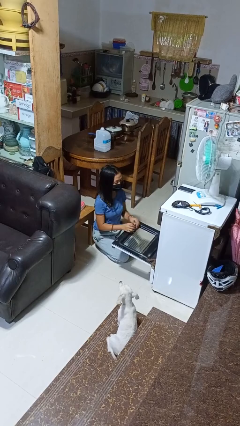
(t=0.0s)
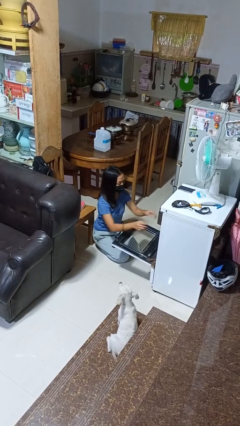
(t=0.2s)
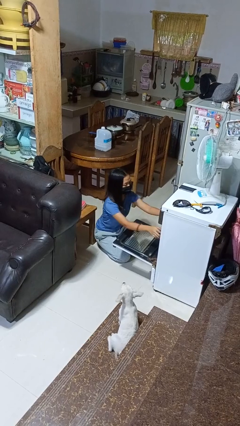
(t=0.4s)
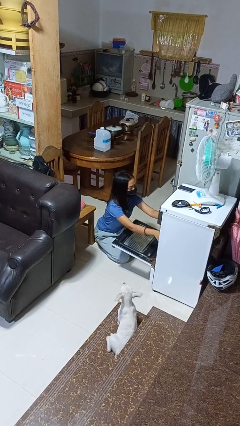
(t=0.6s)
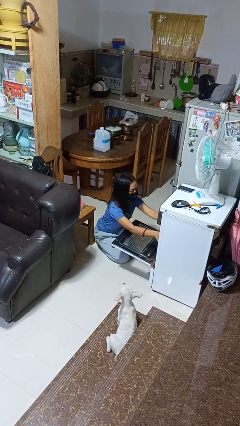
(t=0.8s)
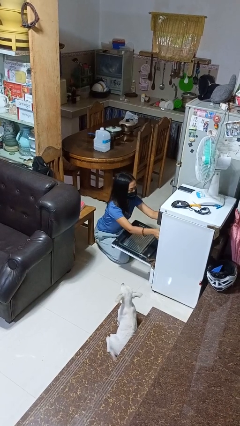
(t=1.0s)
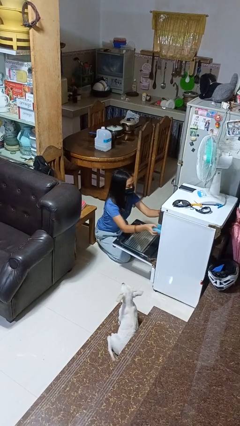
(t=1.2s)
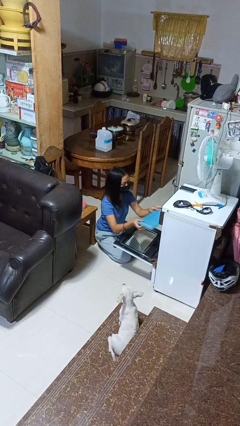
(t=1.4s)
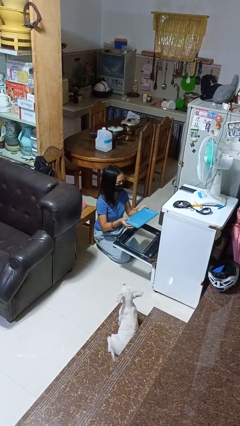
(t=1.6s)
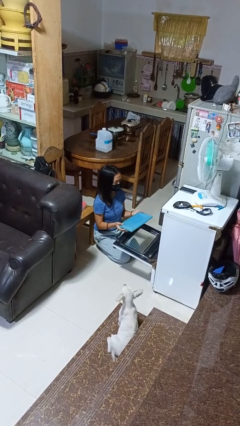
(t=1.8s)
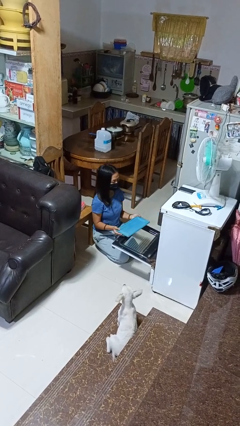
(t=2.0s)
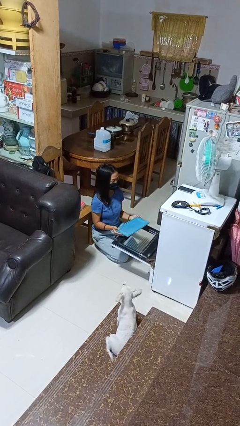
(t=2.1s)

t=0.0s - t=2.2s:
person takes object from oven

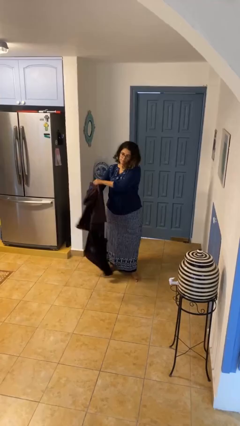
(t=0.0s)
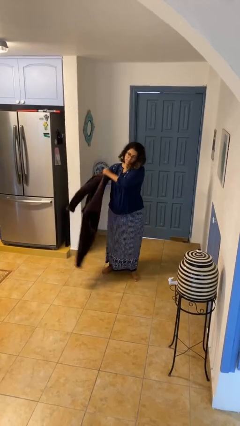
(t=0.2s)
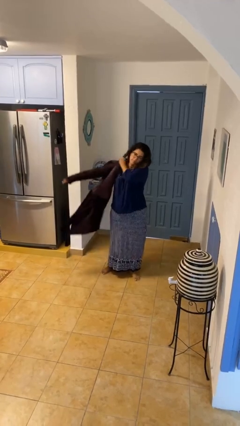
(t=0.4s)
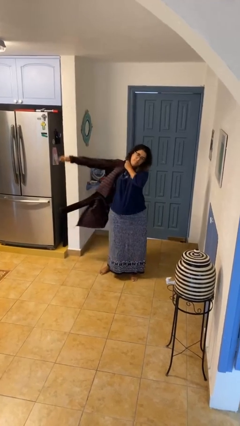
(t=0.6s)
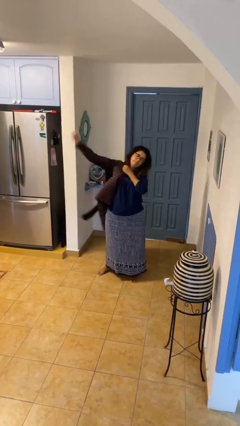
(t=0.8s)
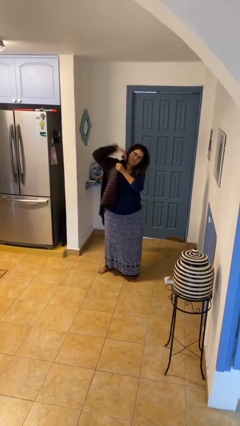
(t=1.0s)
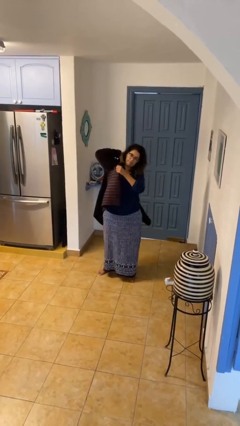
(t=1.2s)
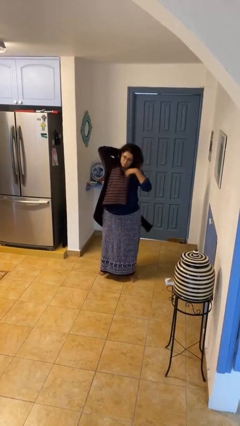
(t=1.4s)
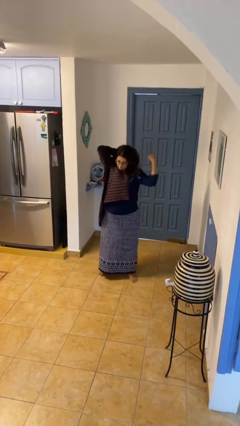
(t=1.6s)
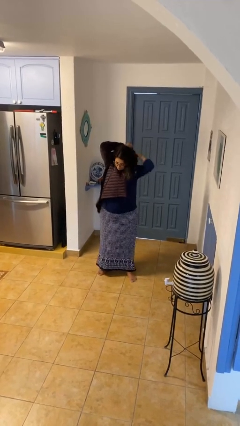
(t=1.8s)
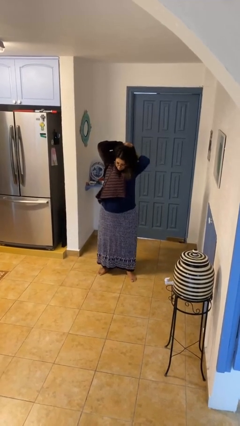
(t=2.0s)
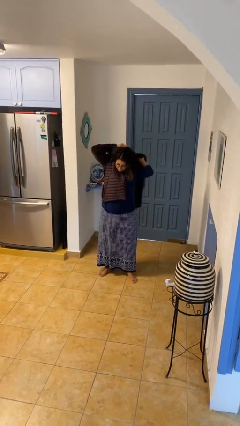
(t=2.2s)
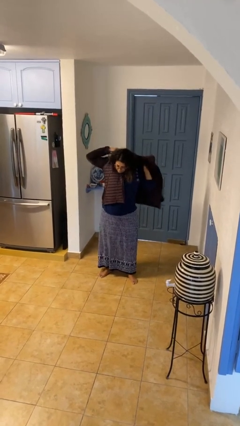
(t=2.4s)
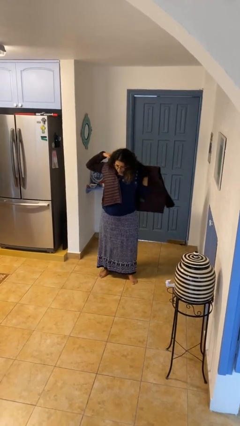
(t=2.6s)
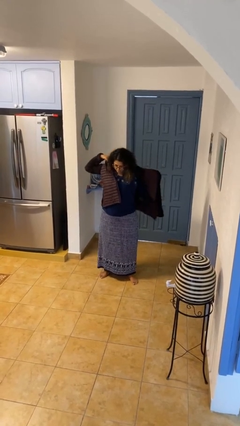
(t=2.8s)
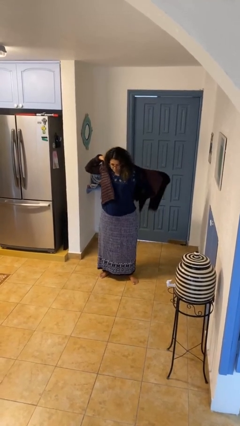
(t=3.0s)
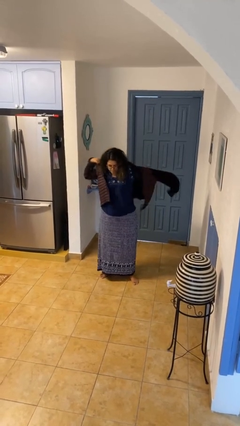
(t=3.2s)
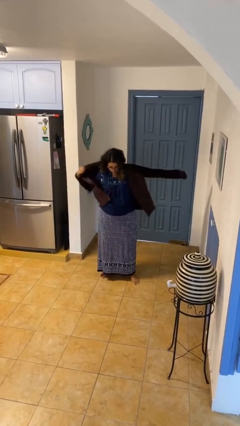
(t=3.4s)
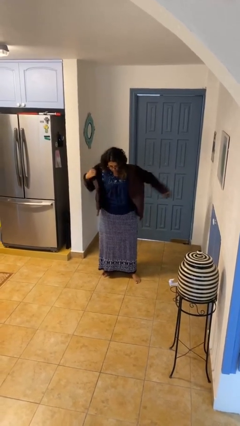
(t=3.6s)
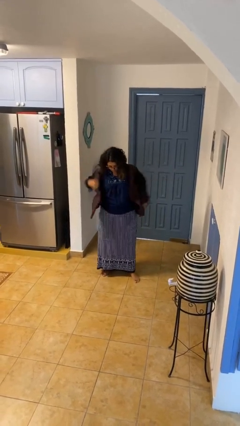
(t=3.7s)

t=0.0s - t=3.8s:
person puts on jacket

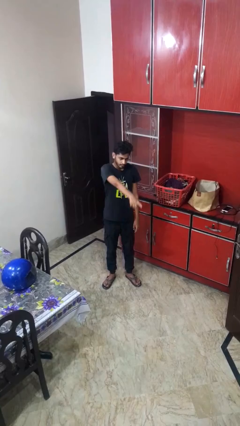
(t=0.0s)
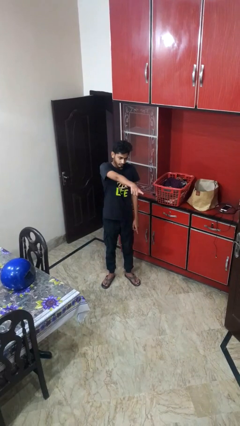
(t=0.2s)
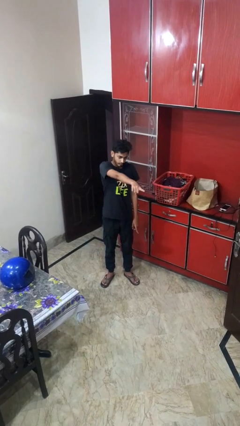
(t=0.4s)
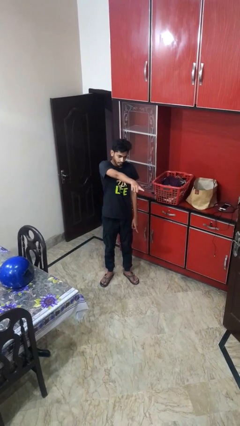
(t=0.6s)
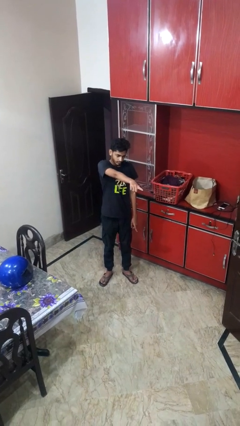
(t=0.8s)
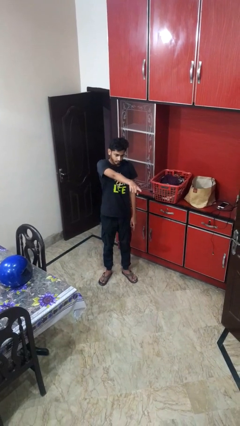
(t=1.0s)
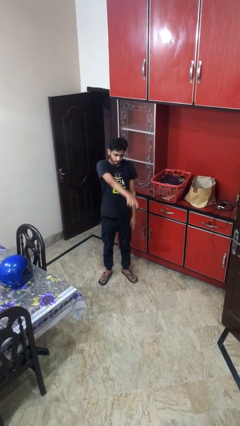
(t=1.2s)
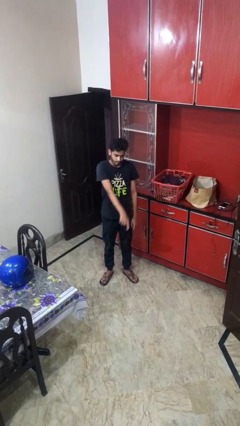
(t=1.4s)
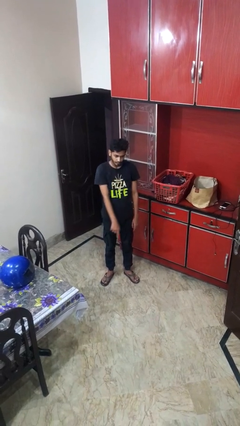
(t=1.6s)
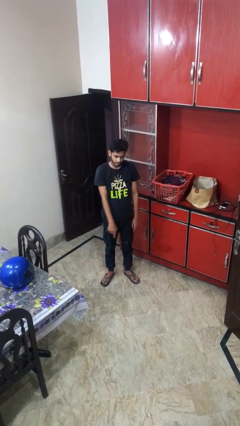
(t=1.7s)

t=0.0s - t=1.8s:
person points at person

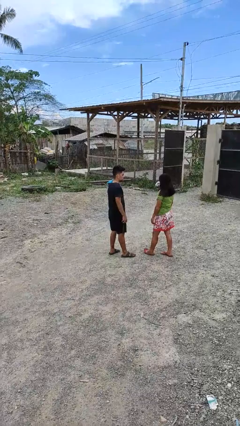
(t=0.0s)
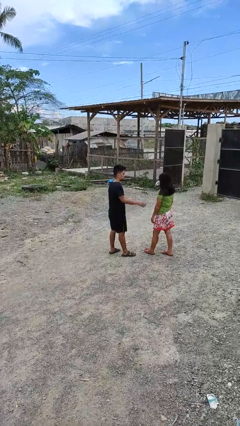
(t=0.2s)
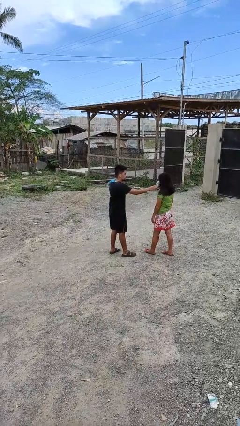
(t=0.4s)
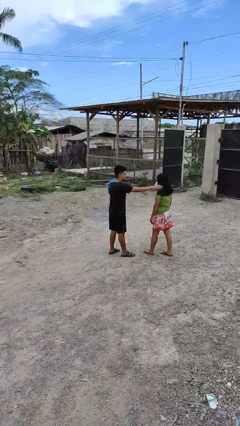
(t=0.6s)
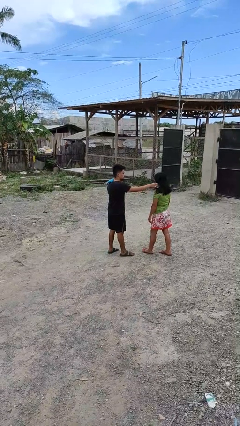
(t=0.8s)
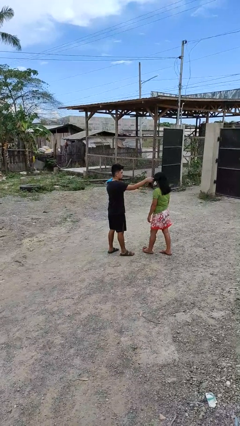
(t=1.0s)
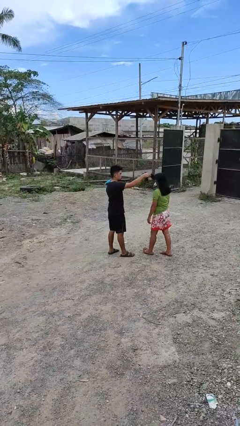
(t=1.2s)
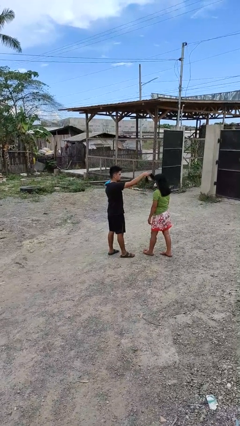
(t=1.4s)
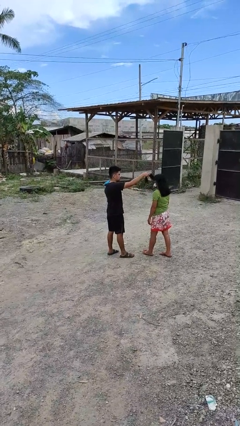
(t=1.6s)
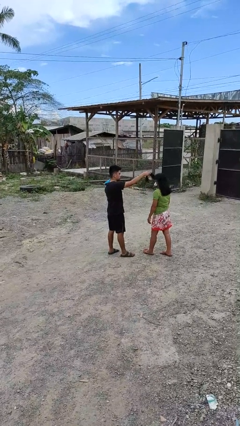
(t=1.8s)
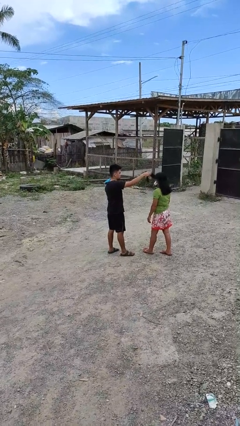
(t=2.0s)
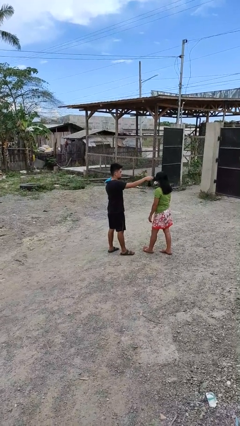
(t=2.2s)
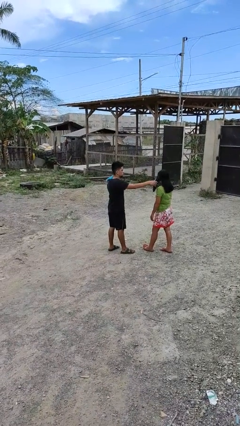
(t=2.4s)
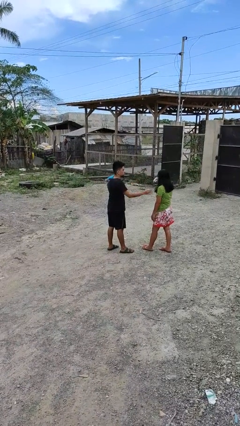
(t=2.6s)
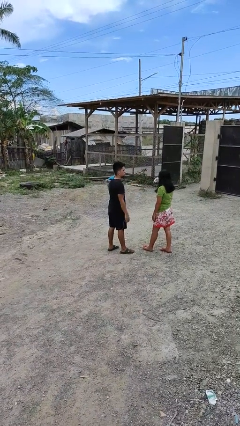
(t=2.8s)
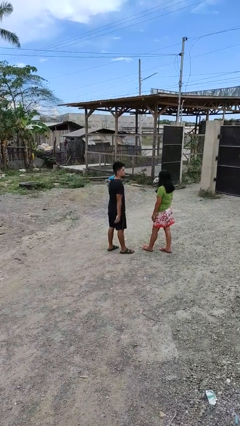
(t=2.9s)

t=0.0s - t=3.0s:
person grabs person by hair

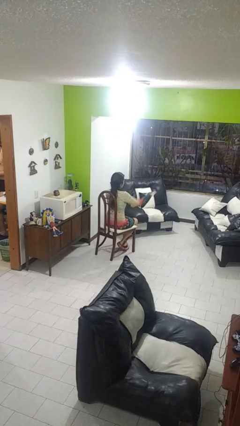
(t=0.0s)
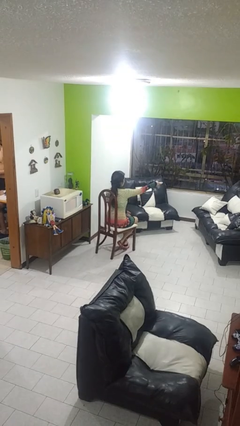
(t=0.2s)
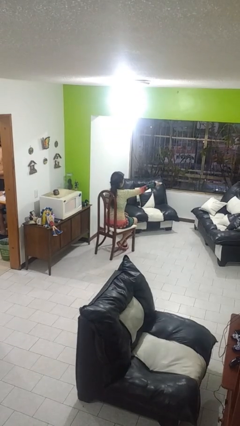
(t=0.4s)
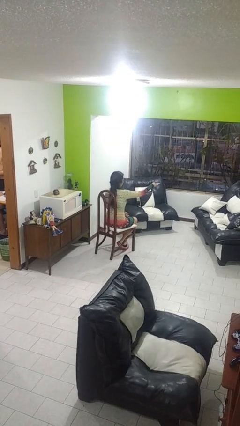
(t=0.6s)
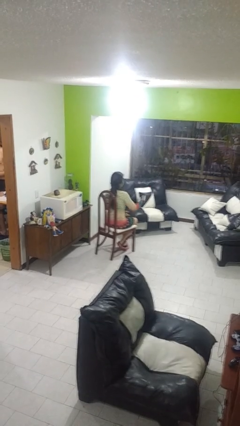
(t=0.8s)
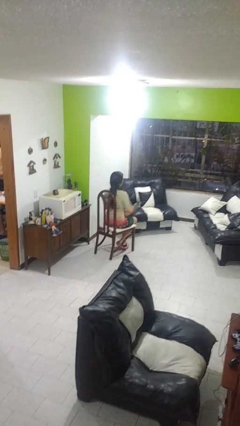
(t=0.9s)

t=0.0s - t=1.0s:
person uses television remote

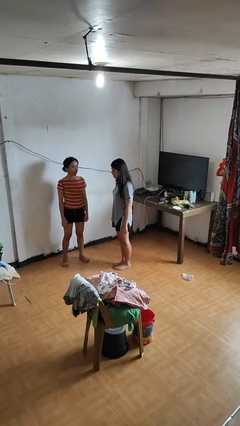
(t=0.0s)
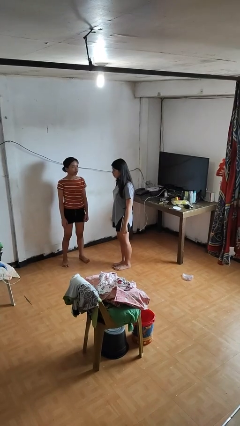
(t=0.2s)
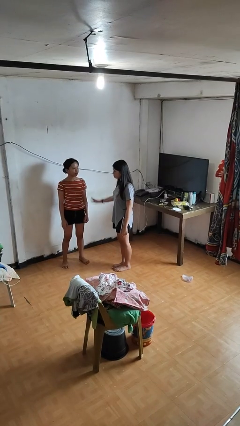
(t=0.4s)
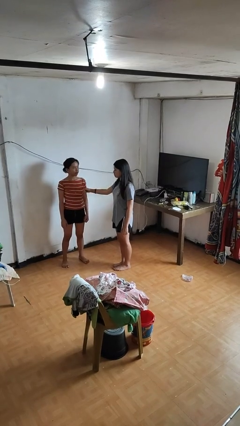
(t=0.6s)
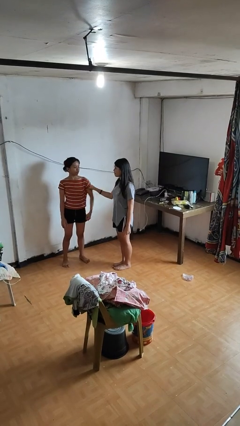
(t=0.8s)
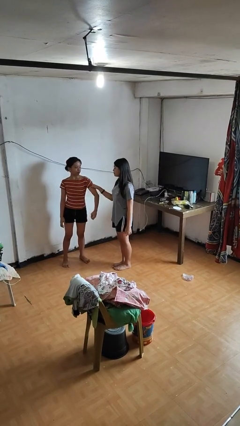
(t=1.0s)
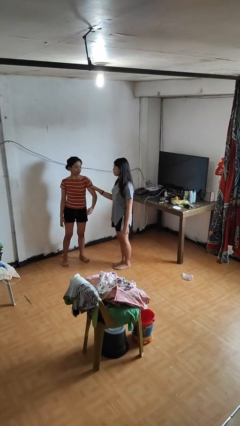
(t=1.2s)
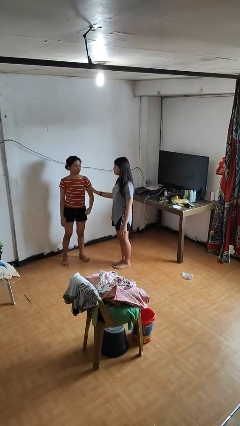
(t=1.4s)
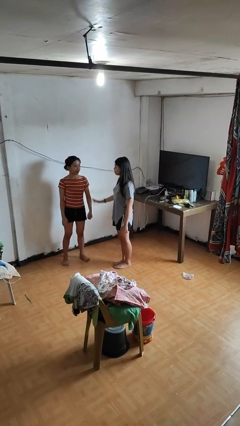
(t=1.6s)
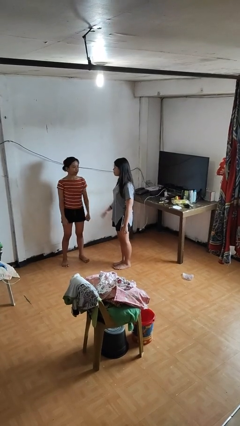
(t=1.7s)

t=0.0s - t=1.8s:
person grabs person by bicep

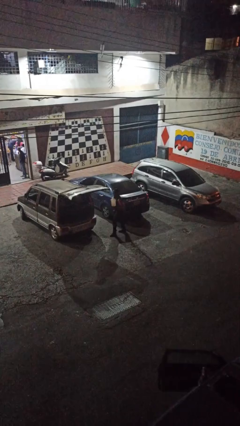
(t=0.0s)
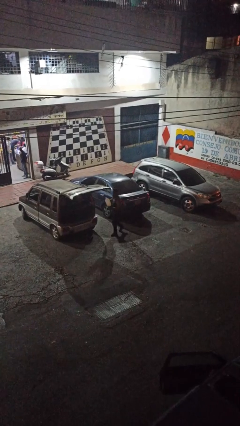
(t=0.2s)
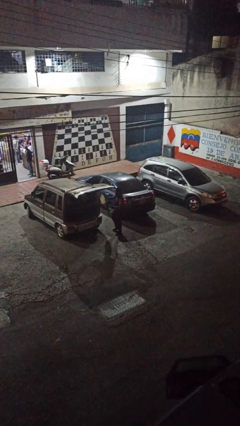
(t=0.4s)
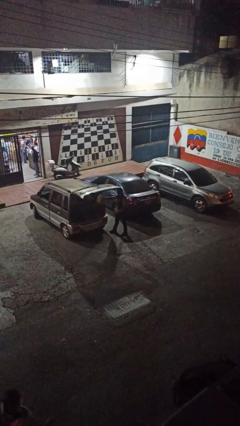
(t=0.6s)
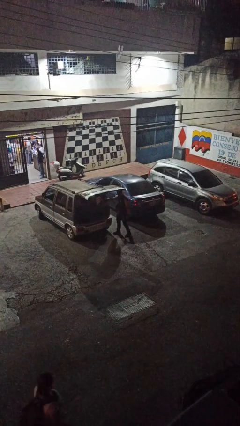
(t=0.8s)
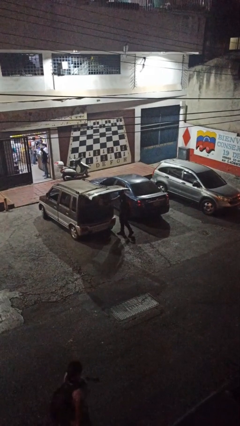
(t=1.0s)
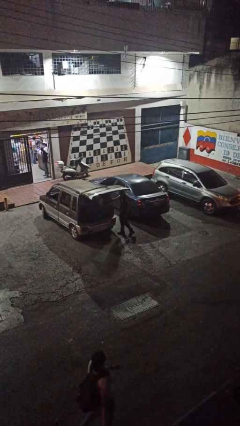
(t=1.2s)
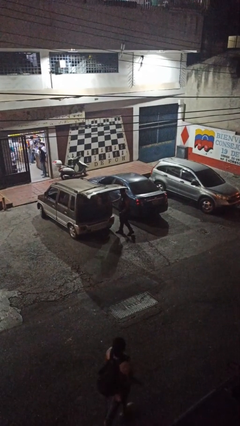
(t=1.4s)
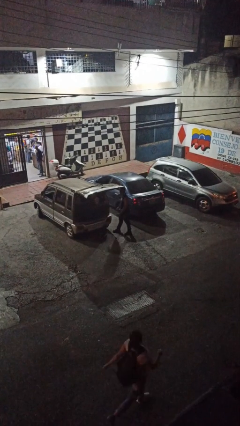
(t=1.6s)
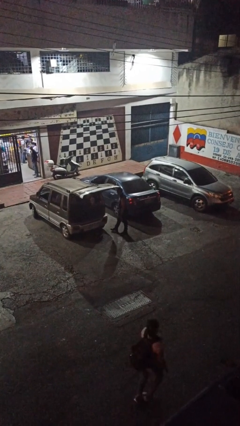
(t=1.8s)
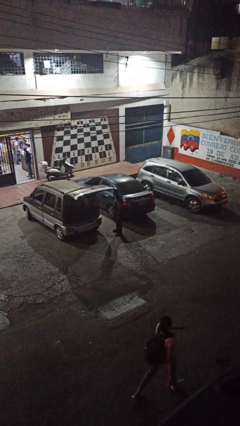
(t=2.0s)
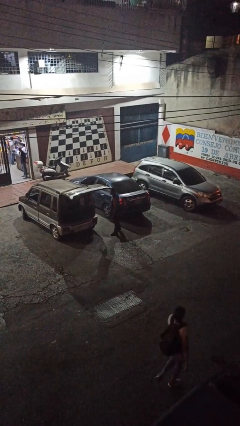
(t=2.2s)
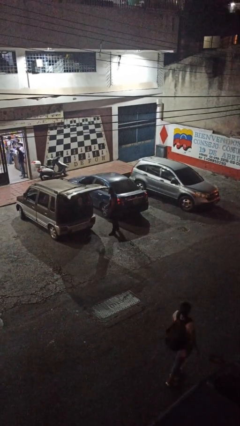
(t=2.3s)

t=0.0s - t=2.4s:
person loads car

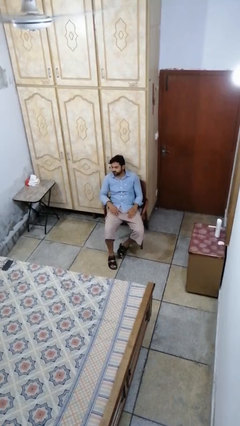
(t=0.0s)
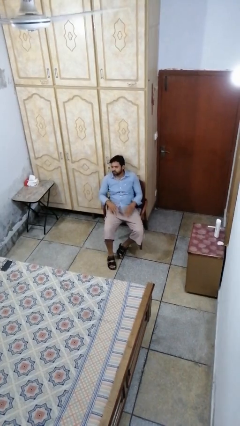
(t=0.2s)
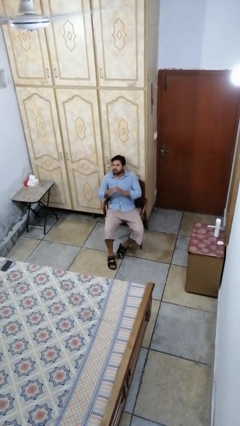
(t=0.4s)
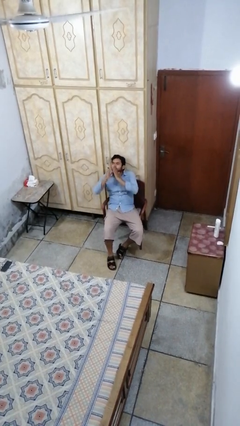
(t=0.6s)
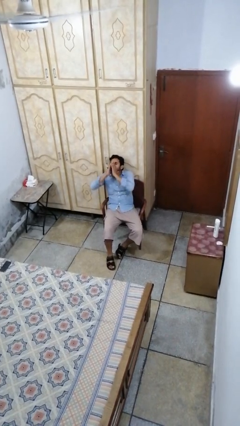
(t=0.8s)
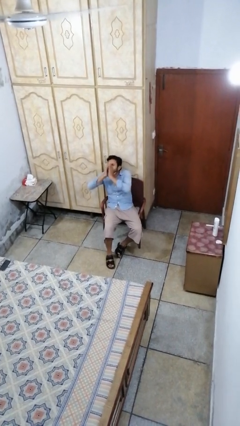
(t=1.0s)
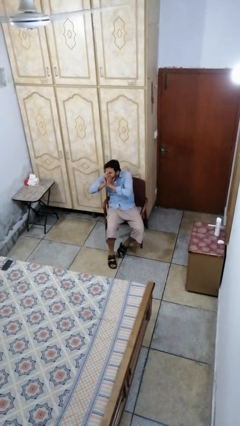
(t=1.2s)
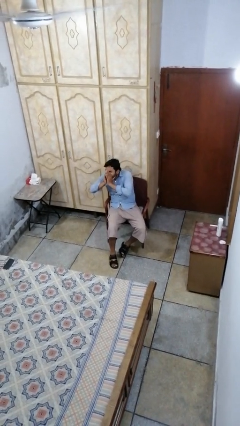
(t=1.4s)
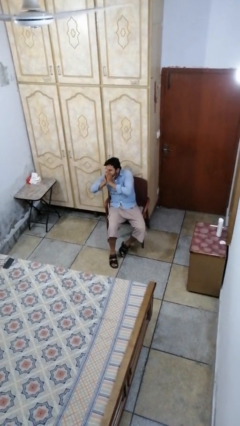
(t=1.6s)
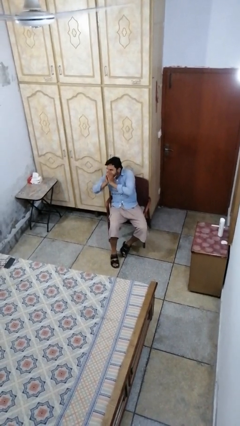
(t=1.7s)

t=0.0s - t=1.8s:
person sneezes into hand
